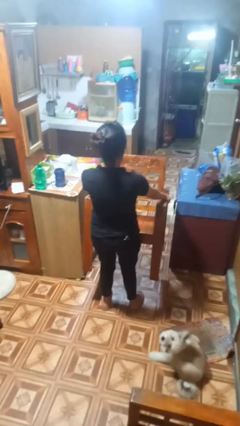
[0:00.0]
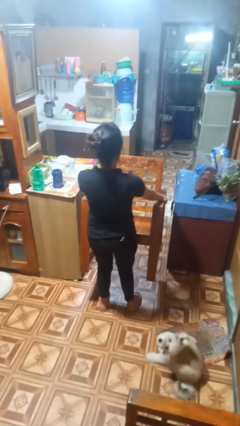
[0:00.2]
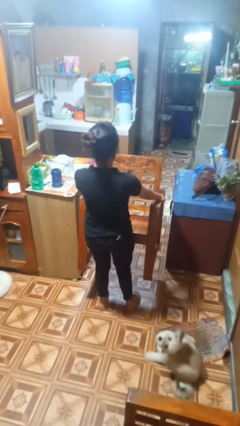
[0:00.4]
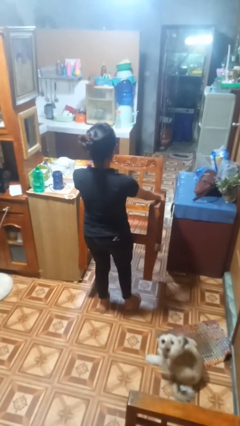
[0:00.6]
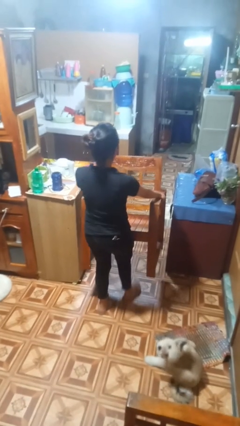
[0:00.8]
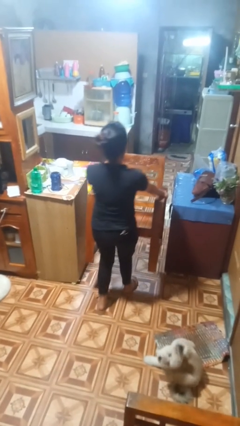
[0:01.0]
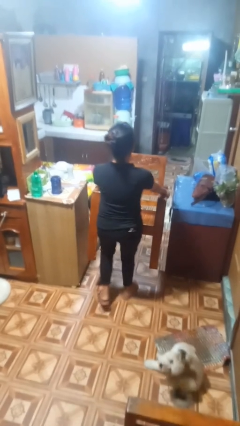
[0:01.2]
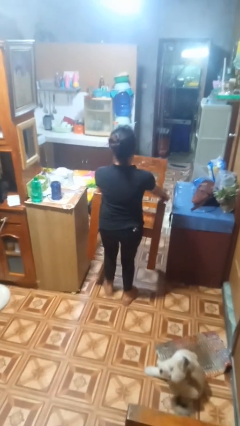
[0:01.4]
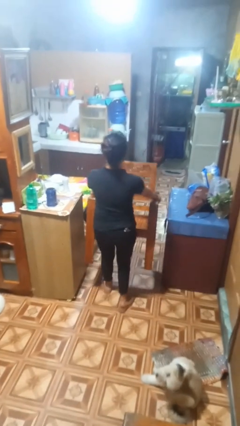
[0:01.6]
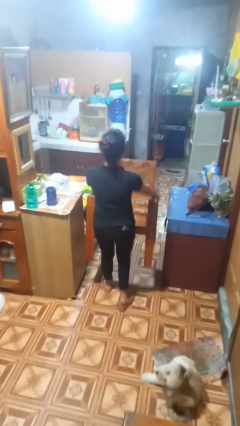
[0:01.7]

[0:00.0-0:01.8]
person carries furniture

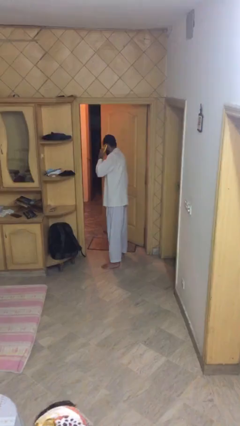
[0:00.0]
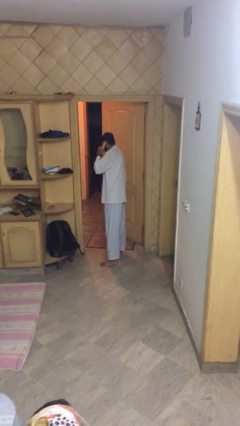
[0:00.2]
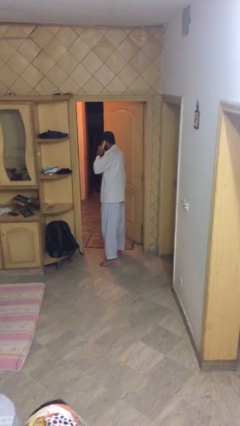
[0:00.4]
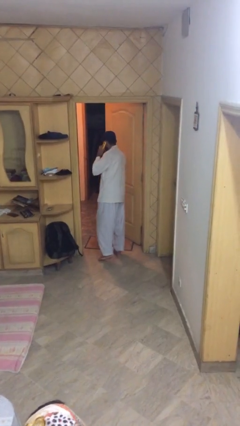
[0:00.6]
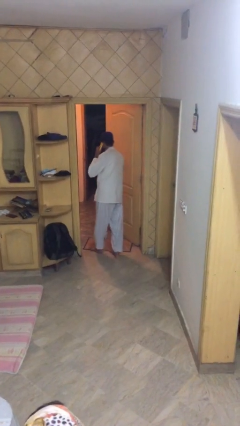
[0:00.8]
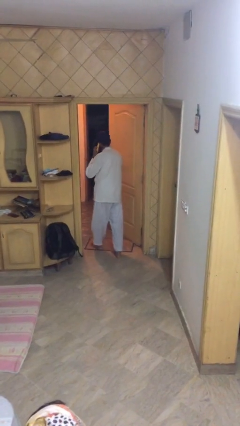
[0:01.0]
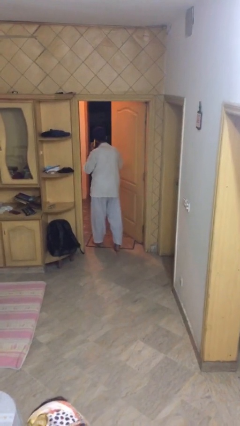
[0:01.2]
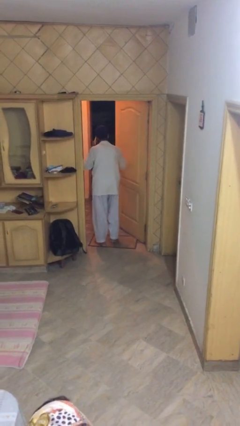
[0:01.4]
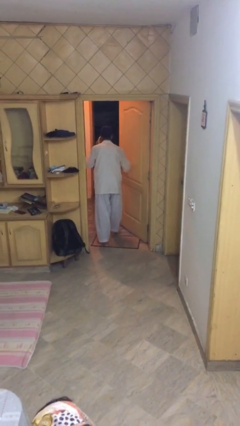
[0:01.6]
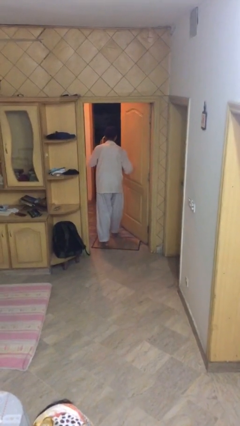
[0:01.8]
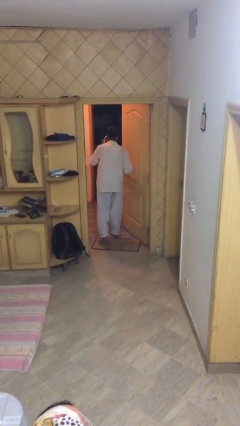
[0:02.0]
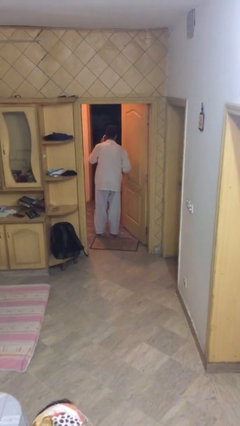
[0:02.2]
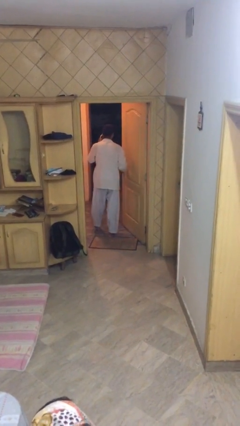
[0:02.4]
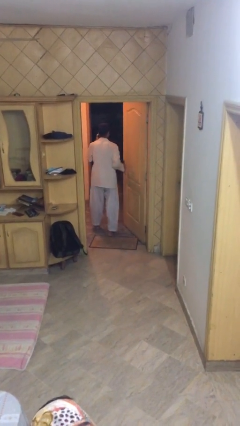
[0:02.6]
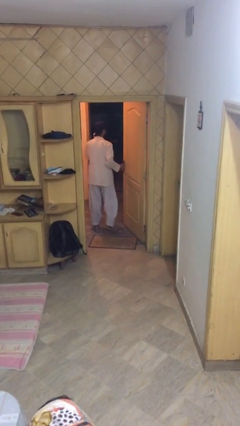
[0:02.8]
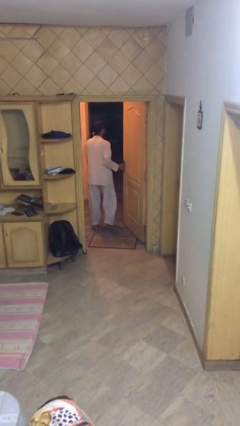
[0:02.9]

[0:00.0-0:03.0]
person exits scene through structure

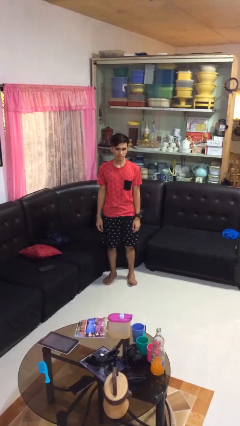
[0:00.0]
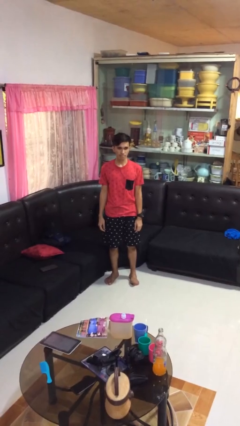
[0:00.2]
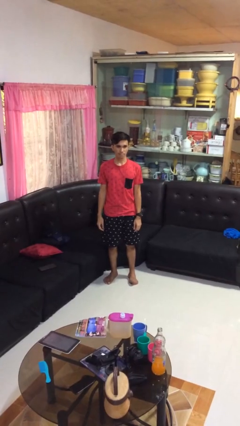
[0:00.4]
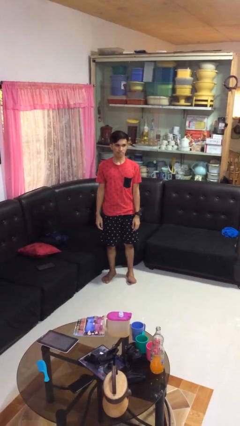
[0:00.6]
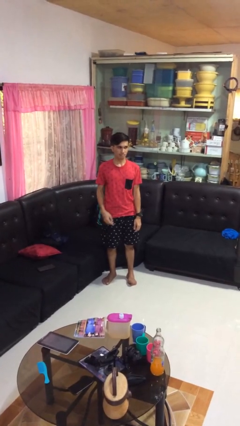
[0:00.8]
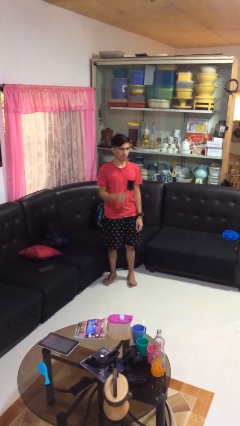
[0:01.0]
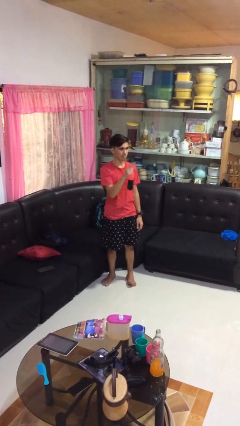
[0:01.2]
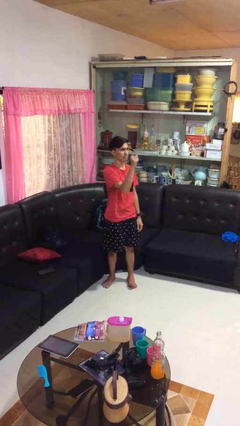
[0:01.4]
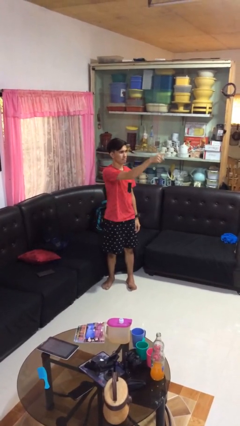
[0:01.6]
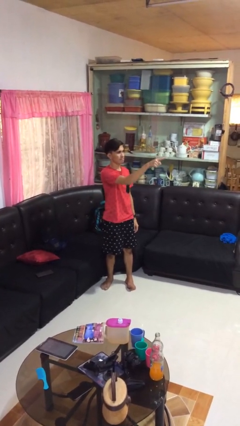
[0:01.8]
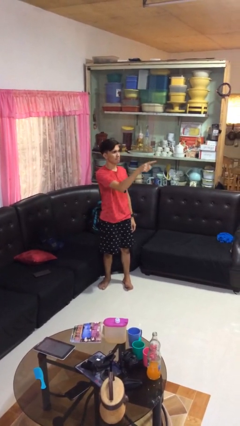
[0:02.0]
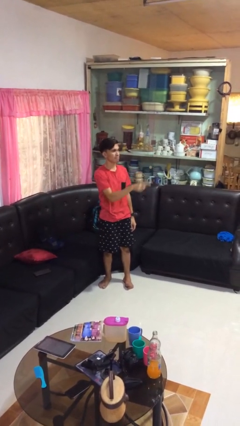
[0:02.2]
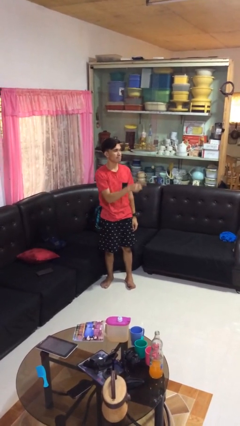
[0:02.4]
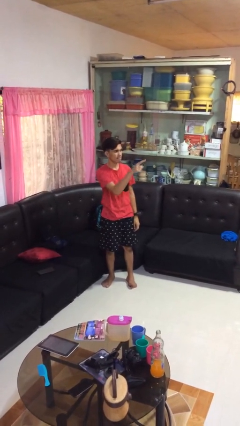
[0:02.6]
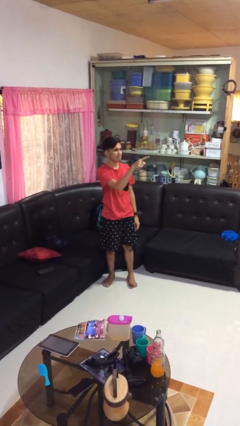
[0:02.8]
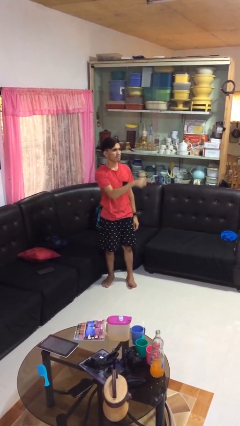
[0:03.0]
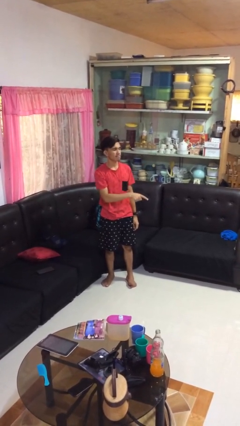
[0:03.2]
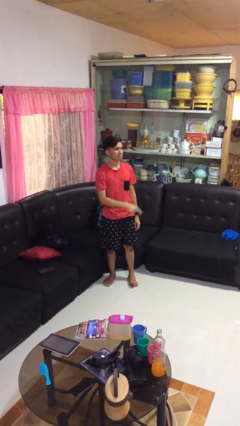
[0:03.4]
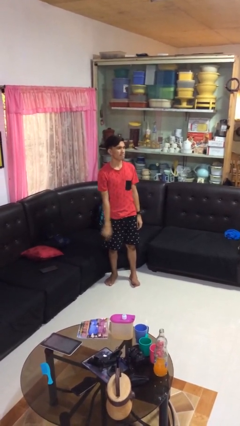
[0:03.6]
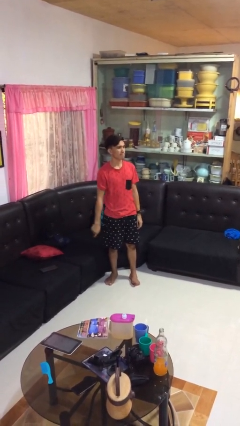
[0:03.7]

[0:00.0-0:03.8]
person points at person

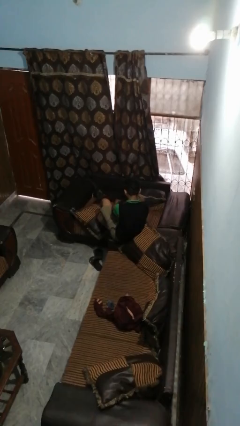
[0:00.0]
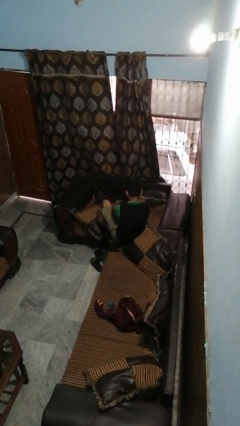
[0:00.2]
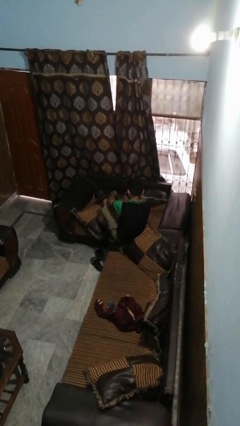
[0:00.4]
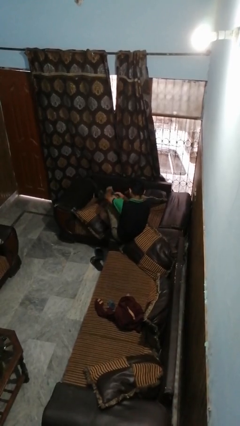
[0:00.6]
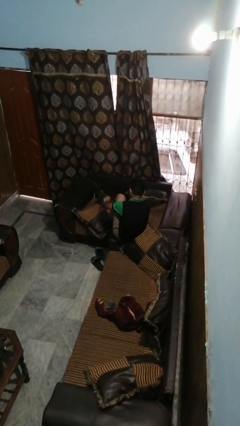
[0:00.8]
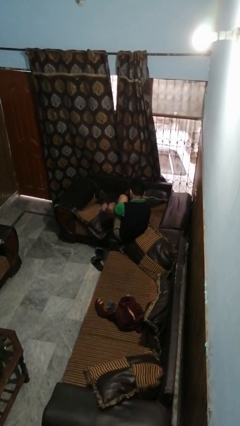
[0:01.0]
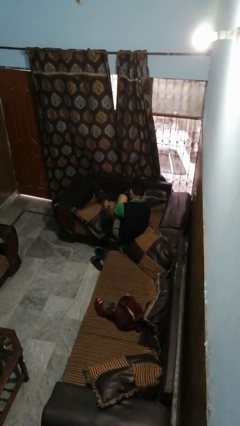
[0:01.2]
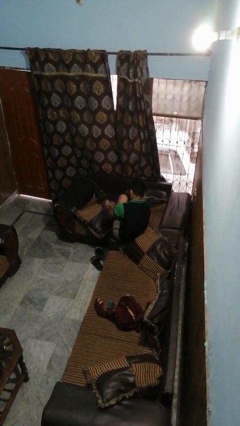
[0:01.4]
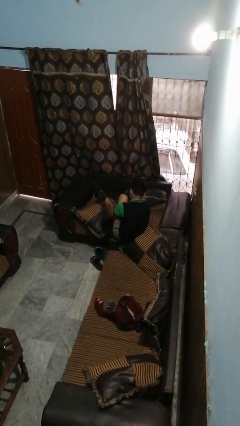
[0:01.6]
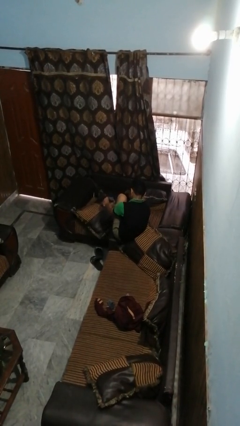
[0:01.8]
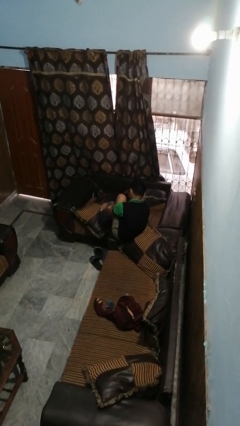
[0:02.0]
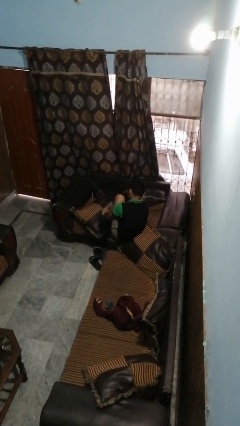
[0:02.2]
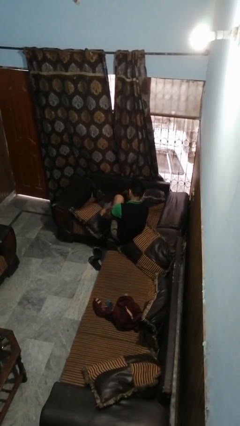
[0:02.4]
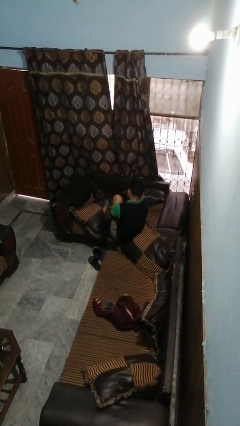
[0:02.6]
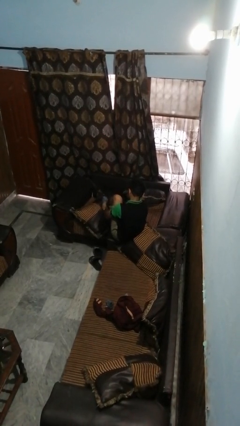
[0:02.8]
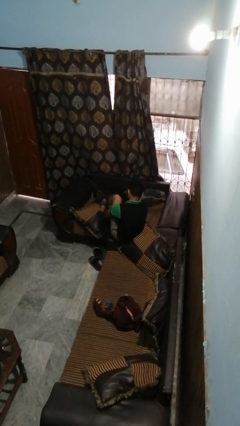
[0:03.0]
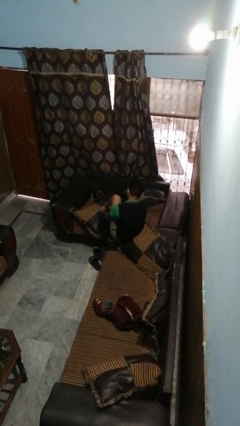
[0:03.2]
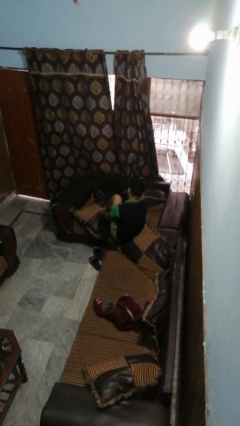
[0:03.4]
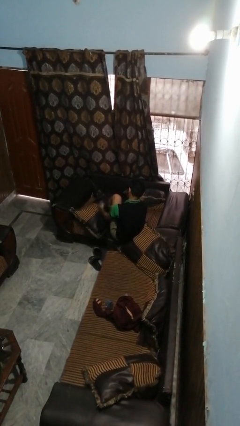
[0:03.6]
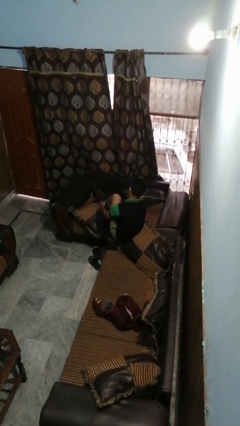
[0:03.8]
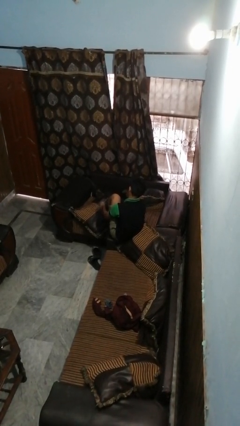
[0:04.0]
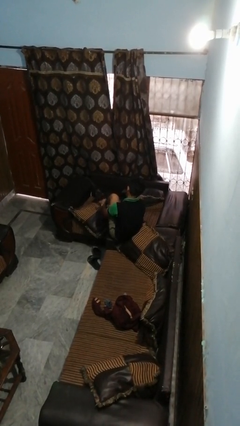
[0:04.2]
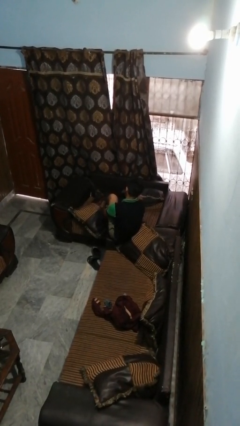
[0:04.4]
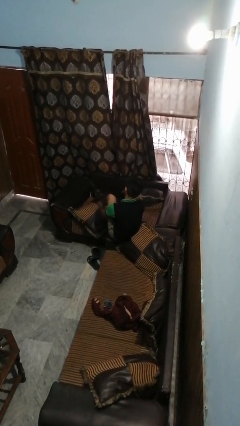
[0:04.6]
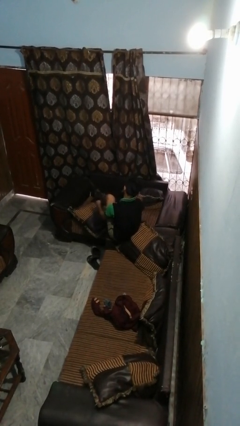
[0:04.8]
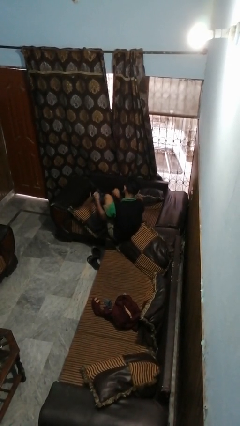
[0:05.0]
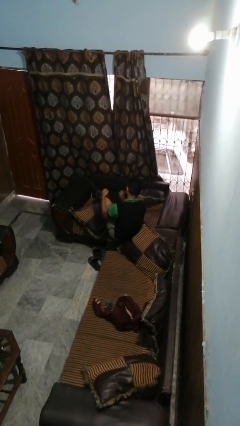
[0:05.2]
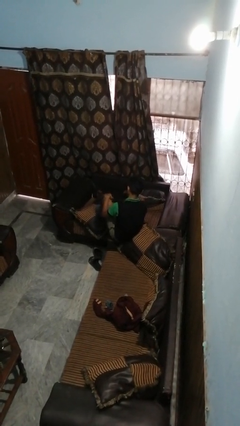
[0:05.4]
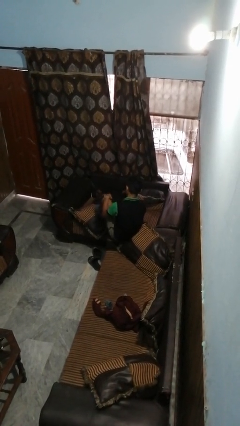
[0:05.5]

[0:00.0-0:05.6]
person puts on socks

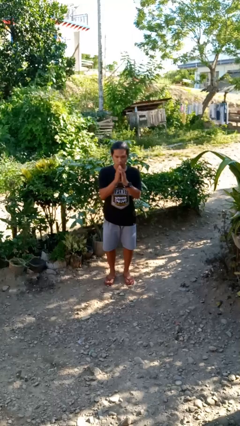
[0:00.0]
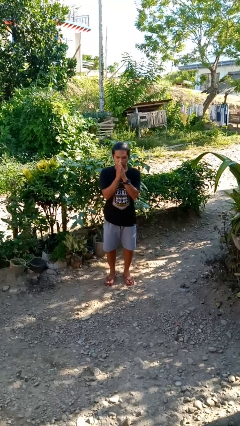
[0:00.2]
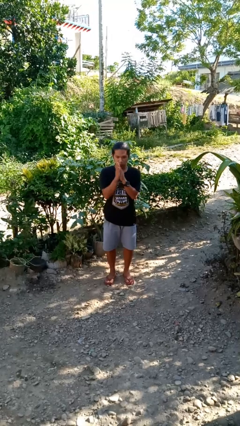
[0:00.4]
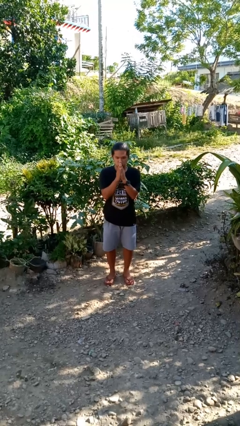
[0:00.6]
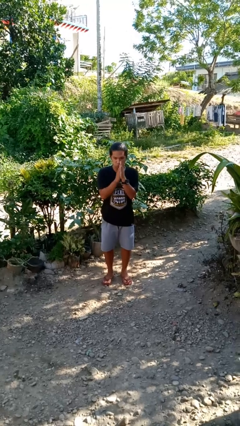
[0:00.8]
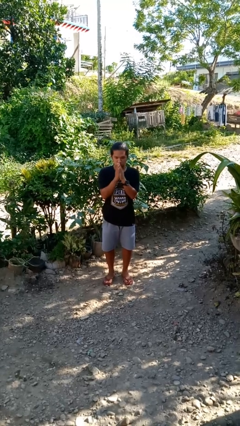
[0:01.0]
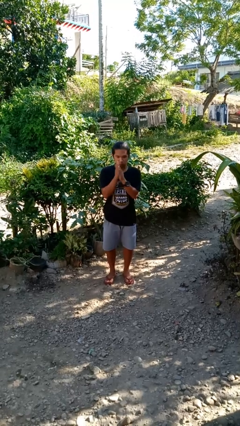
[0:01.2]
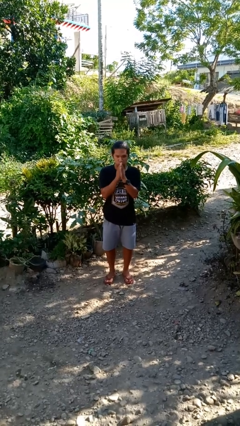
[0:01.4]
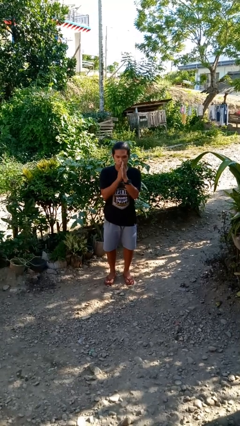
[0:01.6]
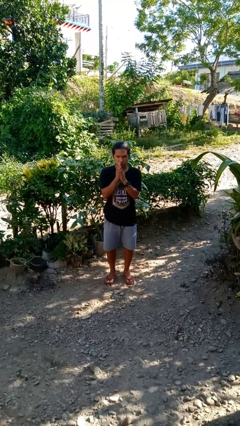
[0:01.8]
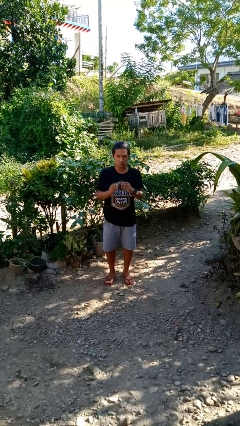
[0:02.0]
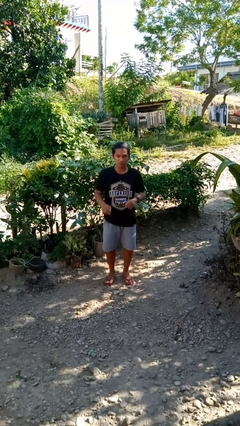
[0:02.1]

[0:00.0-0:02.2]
person blows into hands

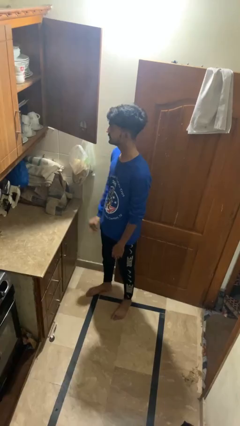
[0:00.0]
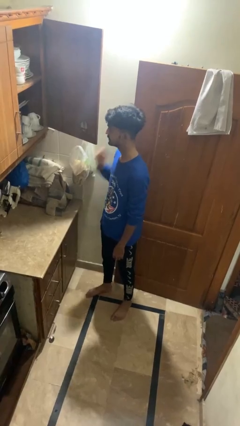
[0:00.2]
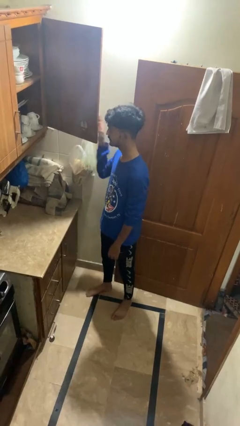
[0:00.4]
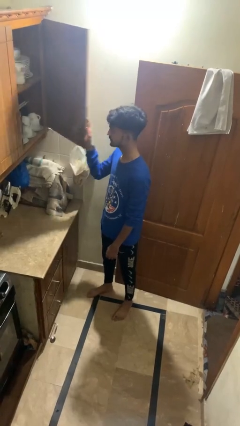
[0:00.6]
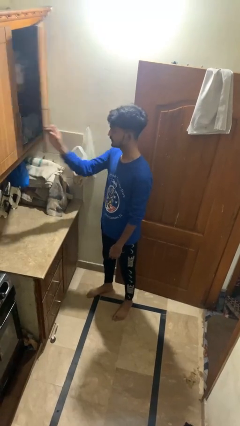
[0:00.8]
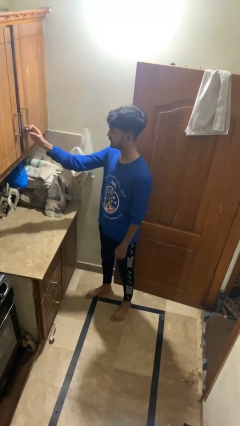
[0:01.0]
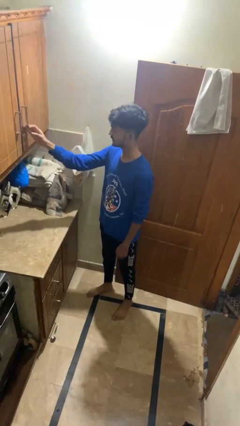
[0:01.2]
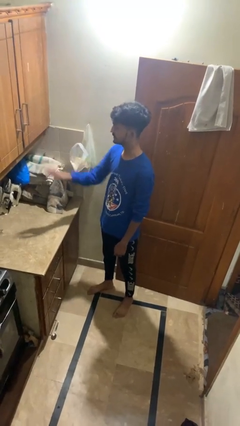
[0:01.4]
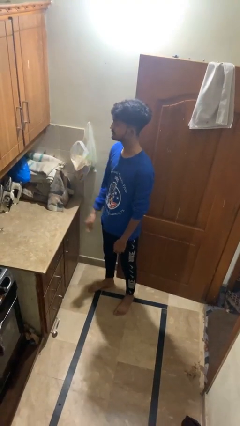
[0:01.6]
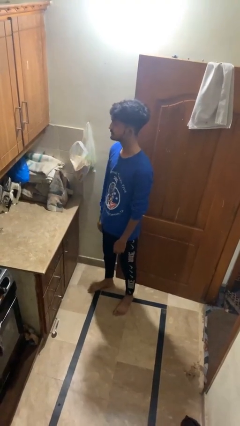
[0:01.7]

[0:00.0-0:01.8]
person closes cabinet
